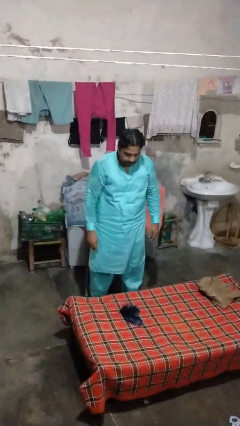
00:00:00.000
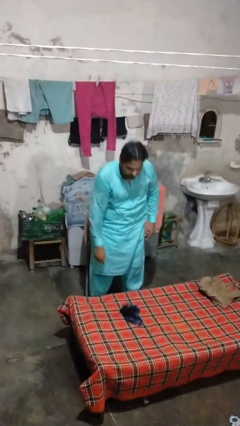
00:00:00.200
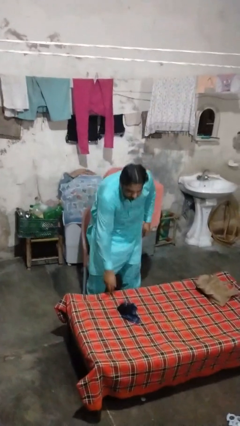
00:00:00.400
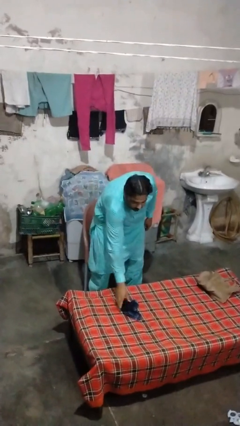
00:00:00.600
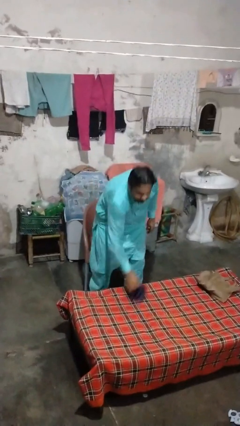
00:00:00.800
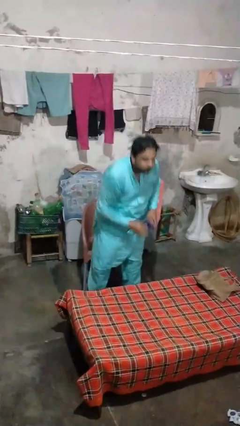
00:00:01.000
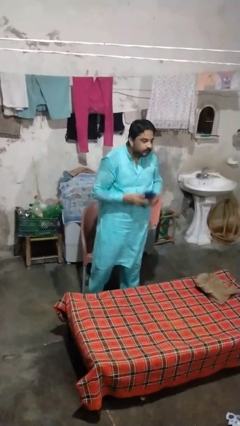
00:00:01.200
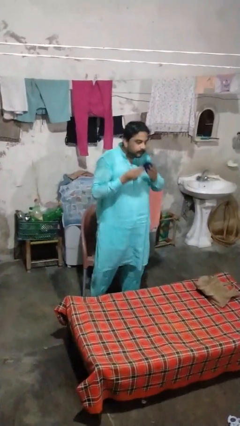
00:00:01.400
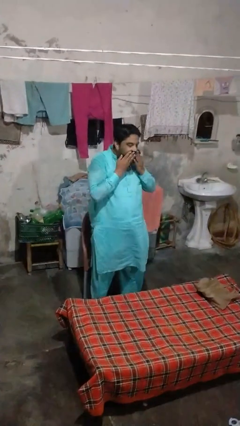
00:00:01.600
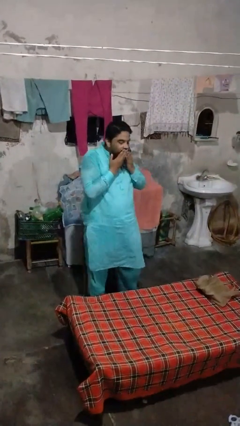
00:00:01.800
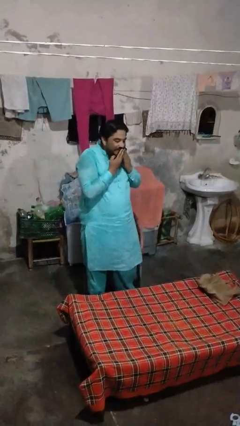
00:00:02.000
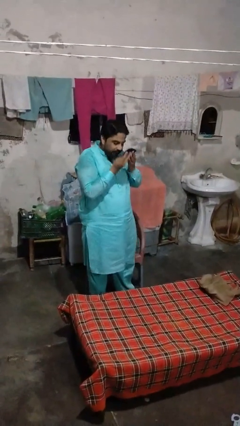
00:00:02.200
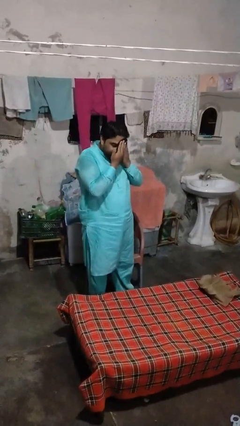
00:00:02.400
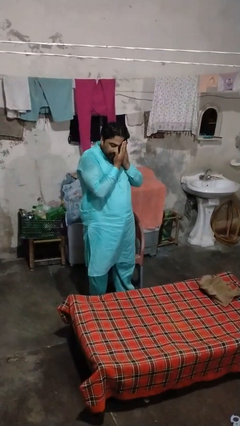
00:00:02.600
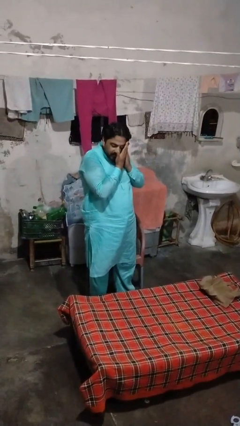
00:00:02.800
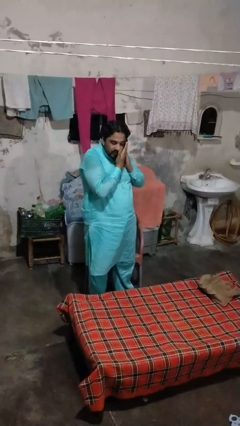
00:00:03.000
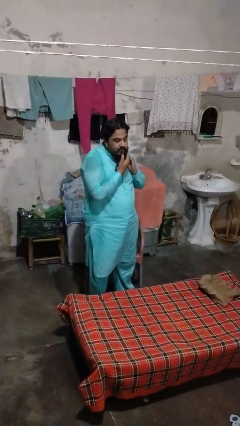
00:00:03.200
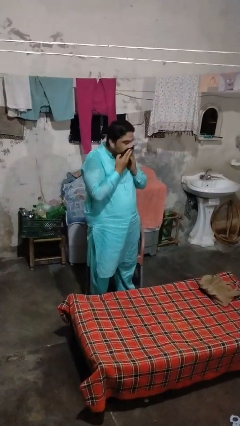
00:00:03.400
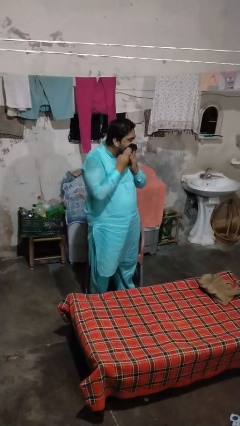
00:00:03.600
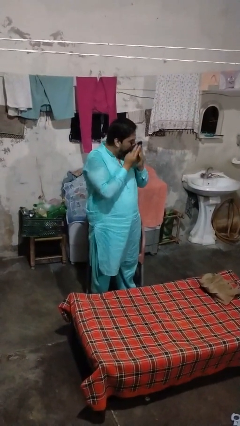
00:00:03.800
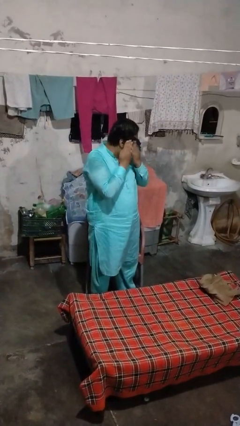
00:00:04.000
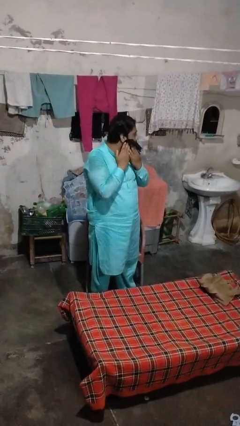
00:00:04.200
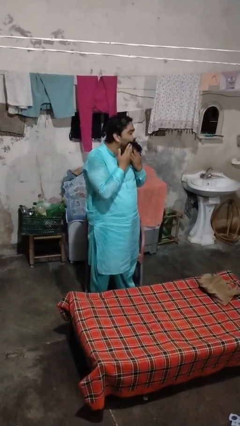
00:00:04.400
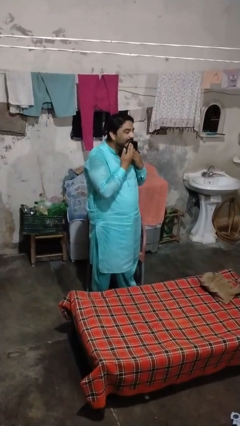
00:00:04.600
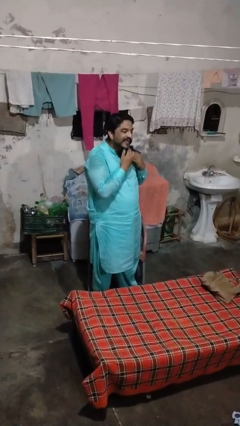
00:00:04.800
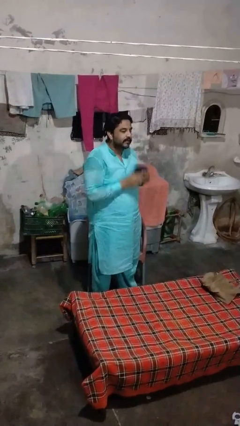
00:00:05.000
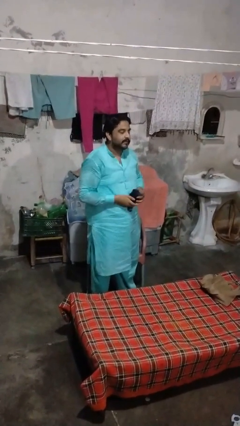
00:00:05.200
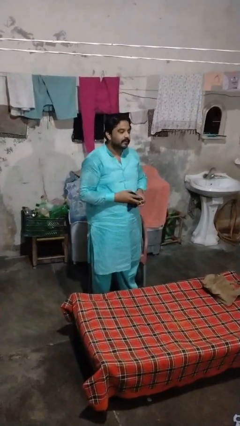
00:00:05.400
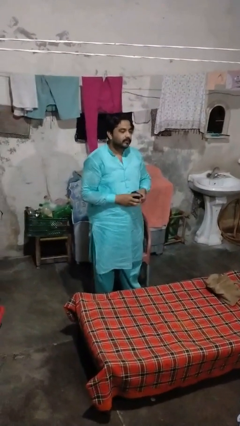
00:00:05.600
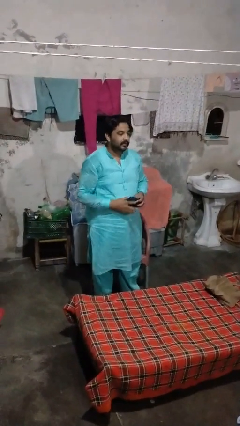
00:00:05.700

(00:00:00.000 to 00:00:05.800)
person wipes mouth with napkin

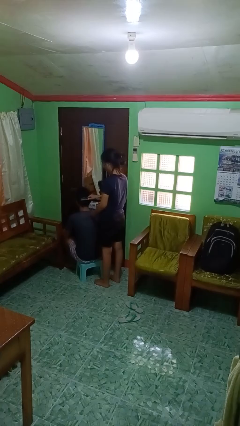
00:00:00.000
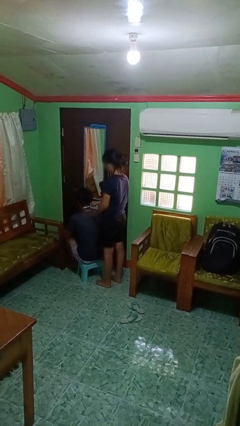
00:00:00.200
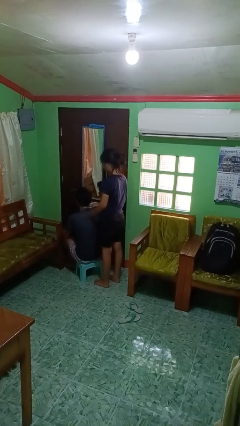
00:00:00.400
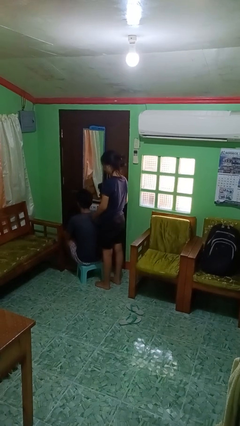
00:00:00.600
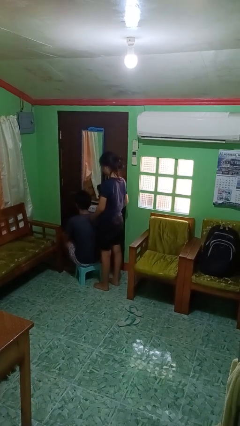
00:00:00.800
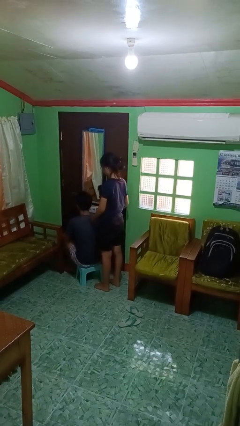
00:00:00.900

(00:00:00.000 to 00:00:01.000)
person brushes hair of person

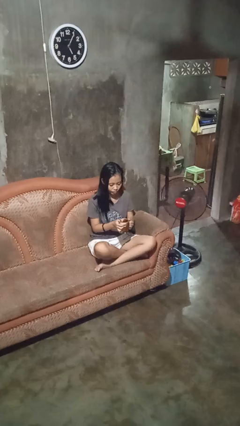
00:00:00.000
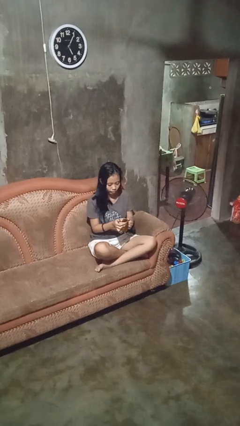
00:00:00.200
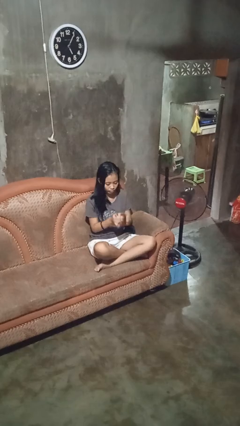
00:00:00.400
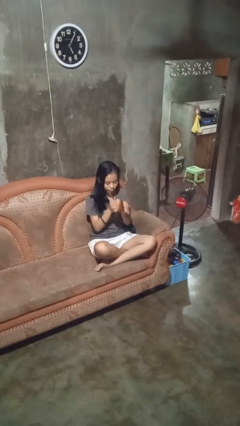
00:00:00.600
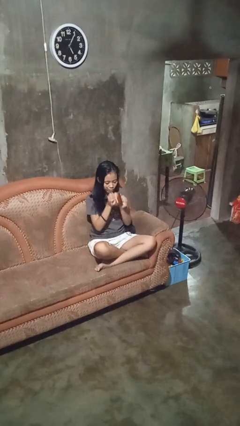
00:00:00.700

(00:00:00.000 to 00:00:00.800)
person drinks from mug

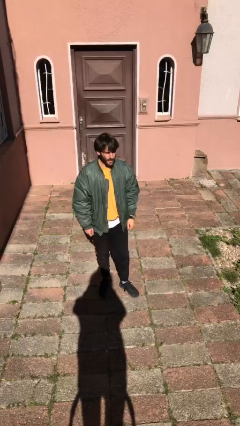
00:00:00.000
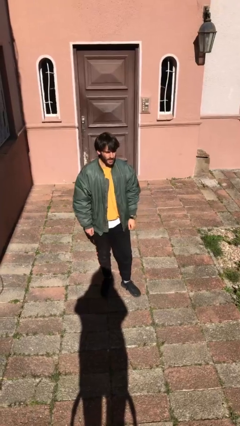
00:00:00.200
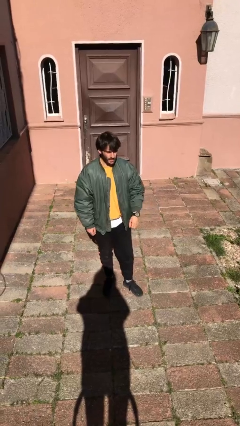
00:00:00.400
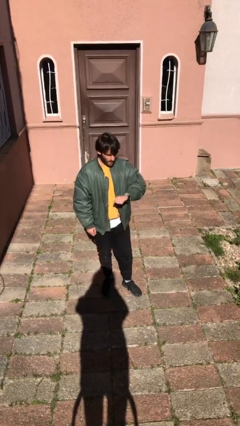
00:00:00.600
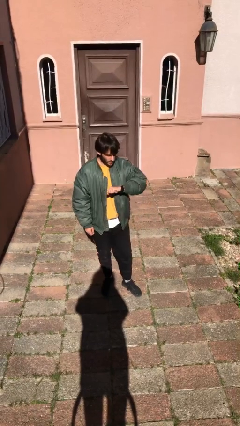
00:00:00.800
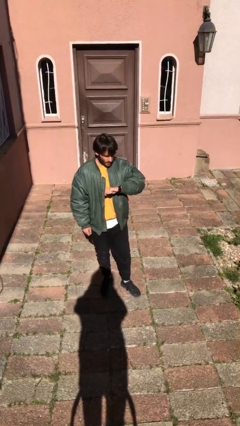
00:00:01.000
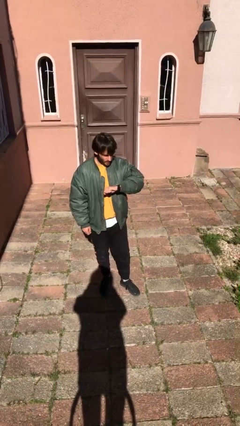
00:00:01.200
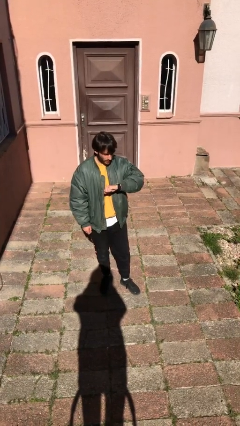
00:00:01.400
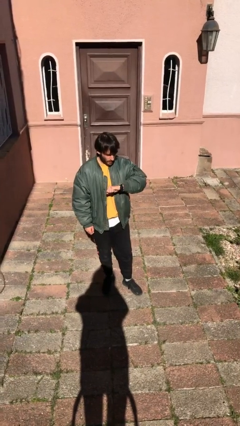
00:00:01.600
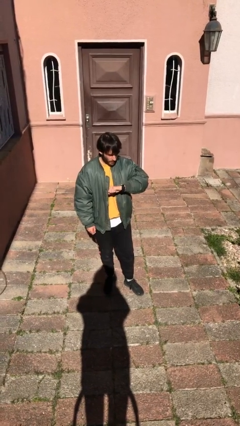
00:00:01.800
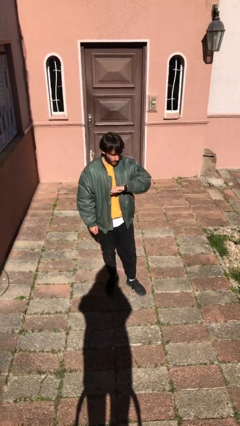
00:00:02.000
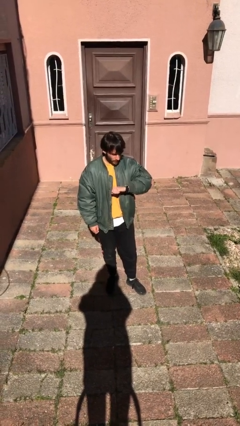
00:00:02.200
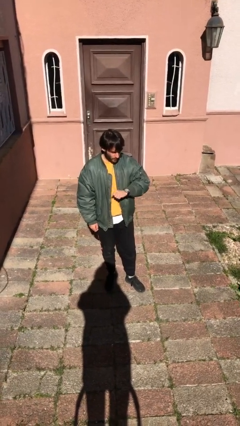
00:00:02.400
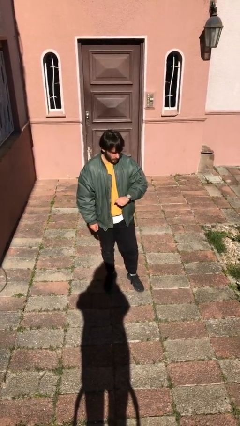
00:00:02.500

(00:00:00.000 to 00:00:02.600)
person looks at wristwatch

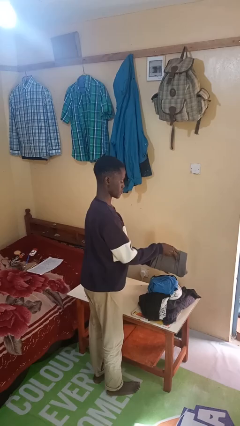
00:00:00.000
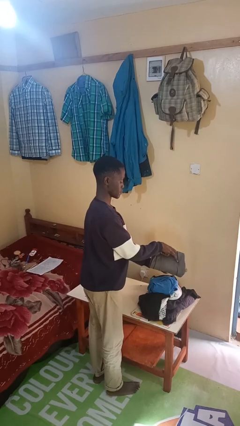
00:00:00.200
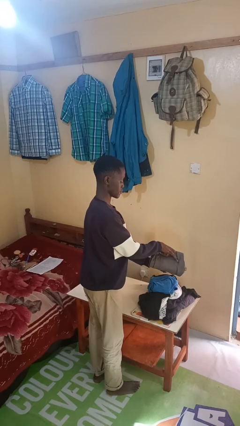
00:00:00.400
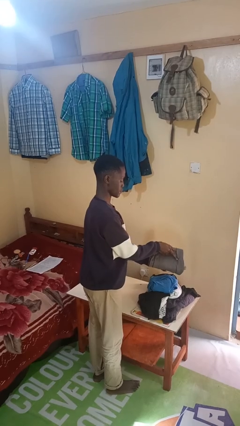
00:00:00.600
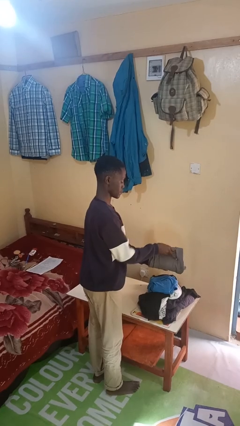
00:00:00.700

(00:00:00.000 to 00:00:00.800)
person folds pants

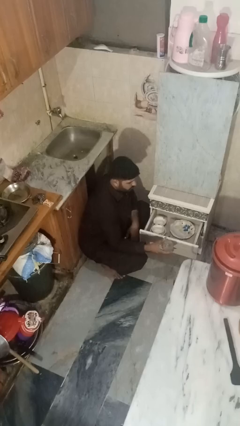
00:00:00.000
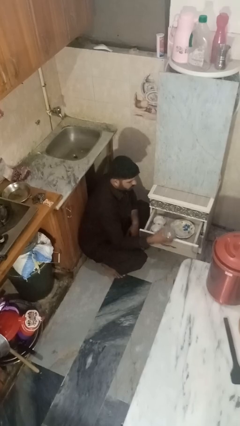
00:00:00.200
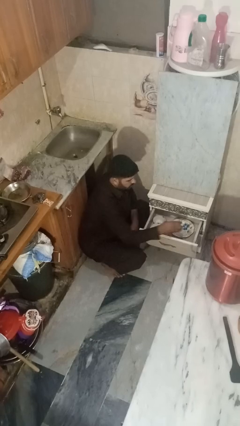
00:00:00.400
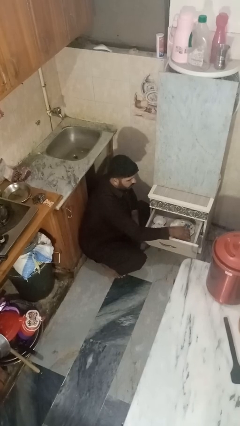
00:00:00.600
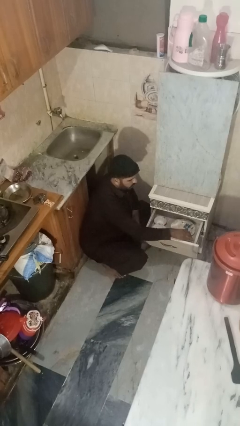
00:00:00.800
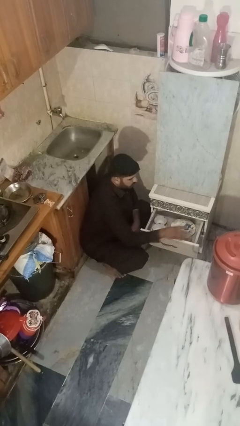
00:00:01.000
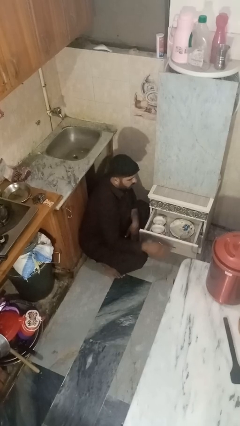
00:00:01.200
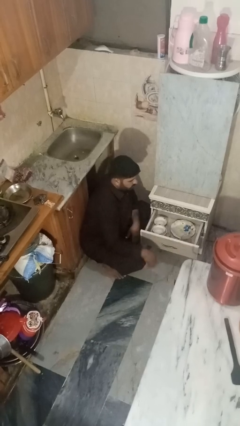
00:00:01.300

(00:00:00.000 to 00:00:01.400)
person puts object into kitchen drawer

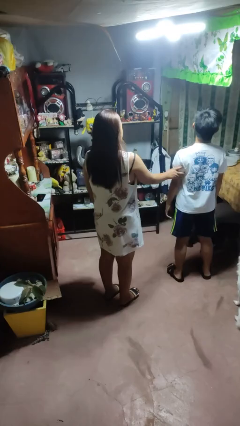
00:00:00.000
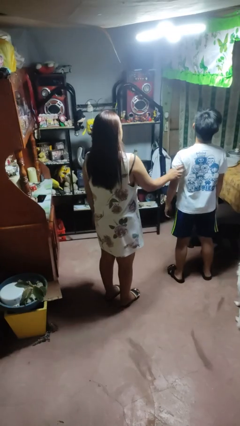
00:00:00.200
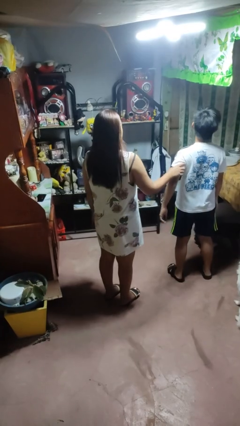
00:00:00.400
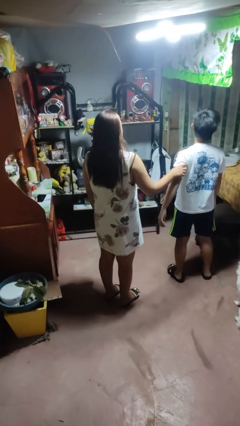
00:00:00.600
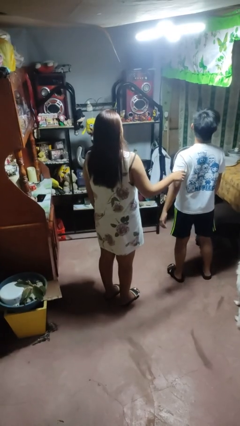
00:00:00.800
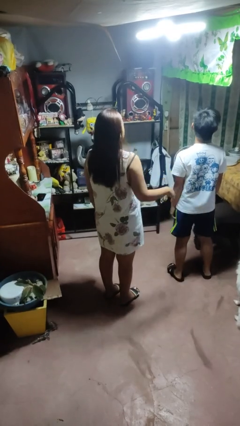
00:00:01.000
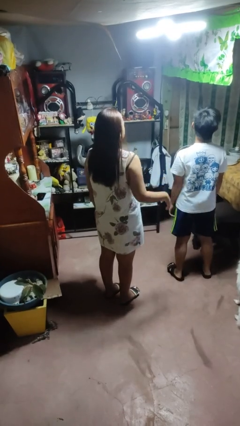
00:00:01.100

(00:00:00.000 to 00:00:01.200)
person grabs person by bicep

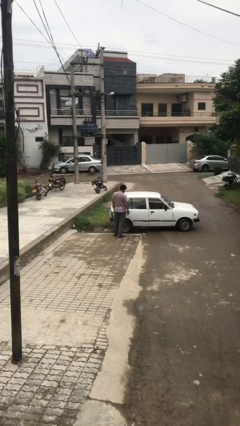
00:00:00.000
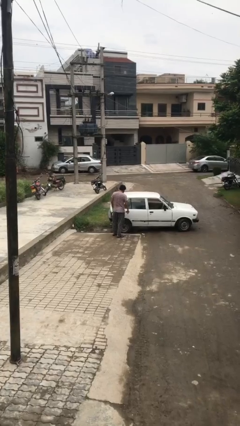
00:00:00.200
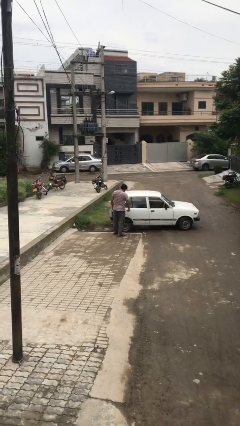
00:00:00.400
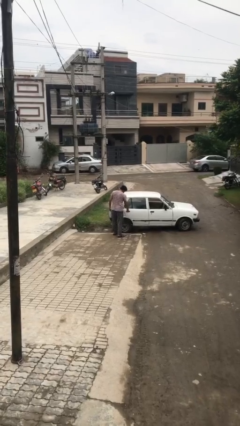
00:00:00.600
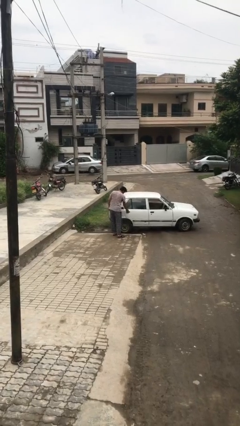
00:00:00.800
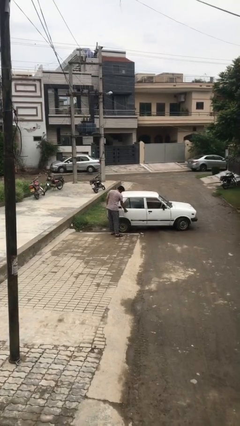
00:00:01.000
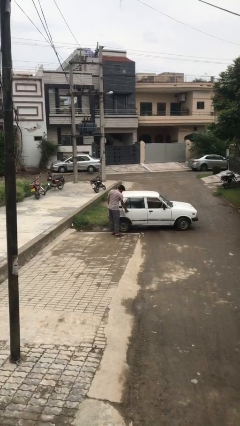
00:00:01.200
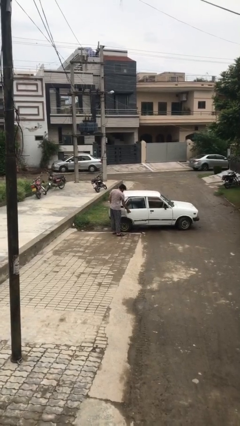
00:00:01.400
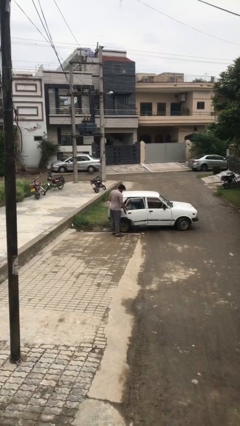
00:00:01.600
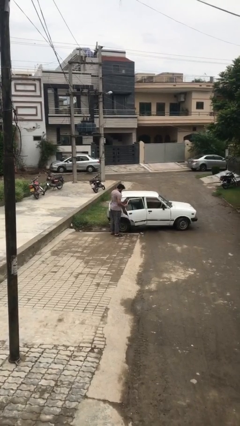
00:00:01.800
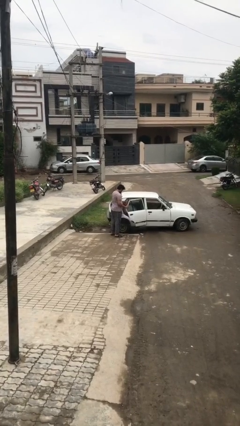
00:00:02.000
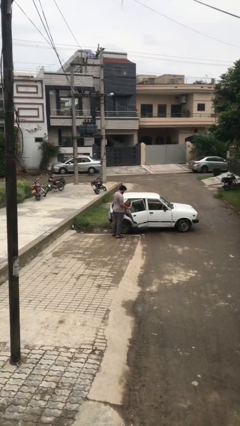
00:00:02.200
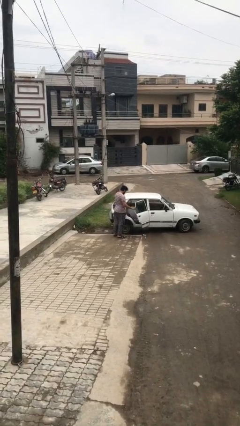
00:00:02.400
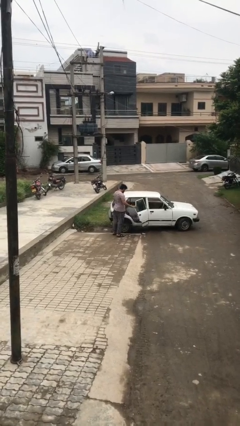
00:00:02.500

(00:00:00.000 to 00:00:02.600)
person opens car door

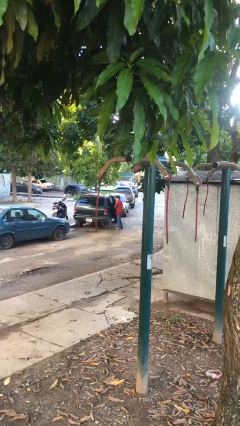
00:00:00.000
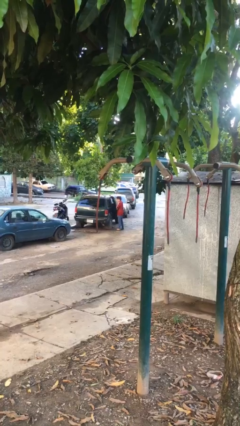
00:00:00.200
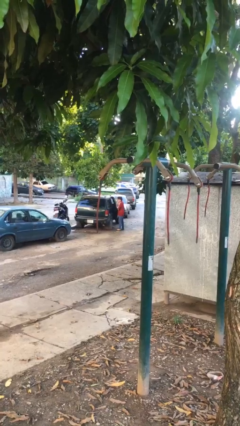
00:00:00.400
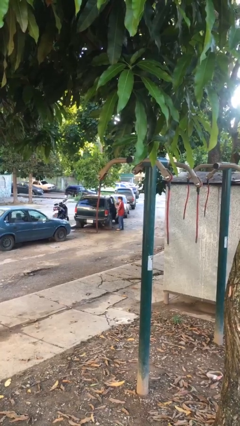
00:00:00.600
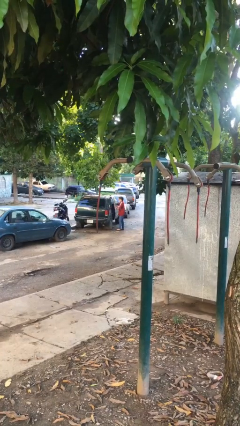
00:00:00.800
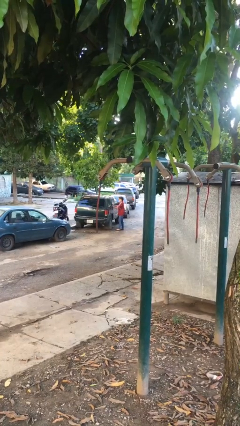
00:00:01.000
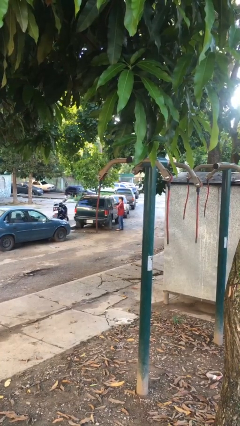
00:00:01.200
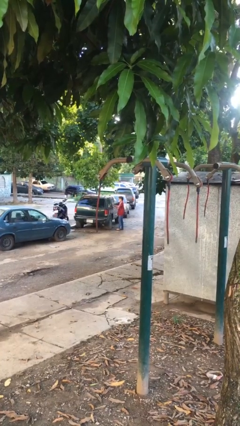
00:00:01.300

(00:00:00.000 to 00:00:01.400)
person closes car door
